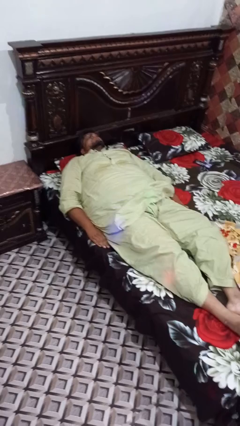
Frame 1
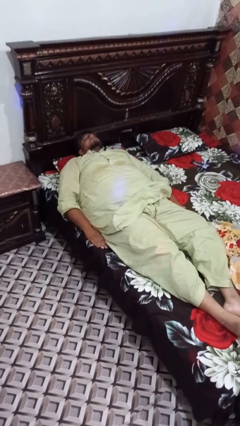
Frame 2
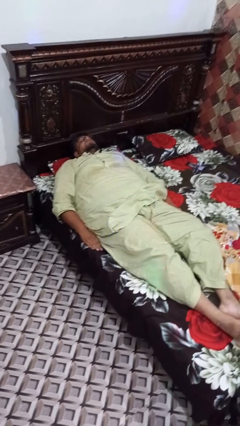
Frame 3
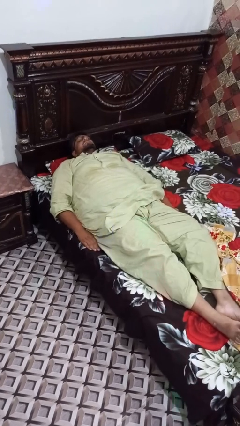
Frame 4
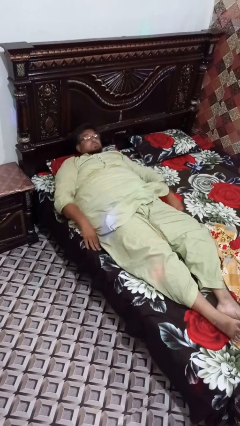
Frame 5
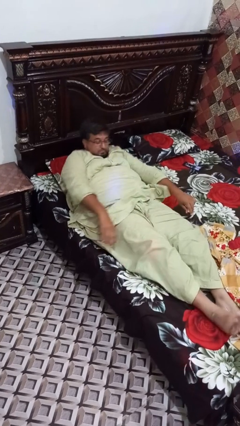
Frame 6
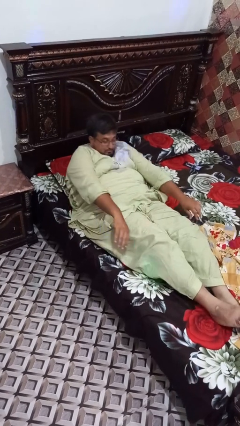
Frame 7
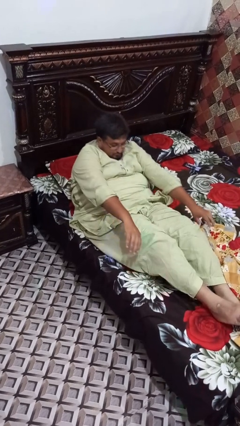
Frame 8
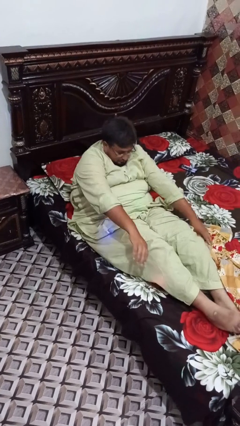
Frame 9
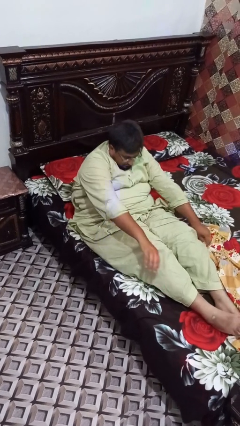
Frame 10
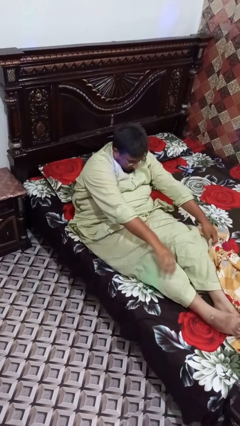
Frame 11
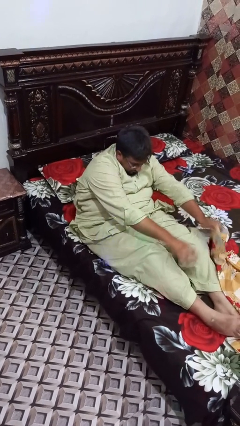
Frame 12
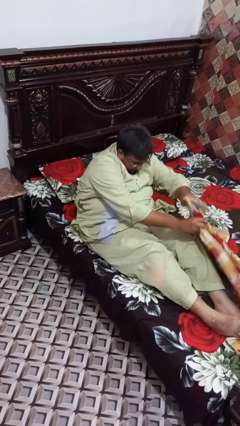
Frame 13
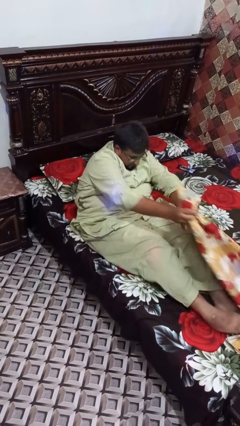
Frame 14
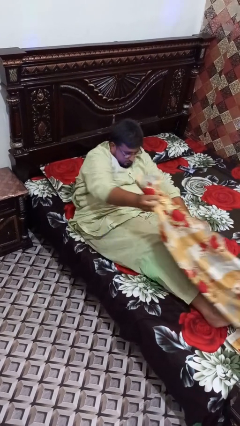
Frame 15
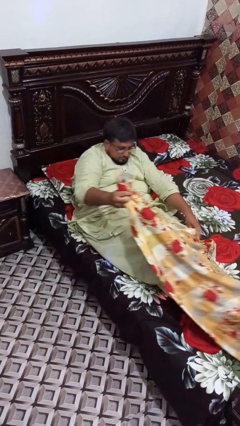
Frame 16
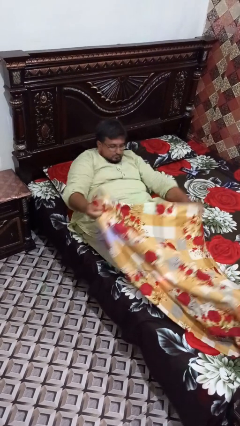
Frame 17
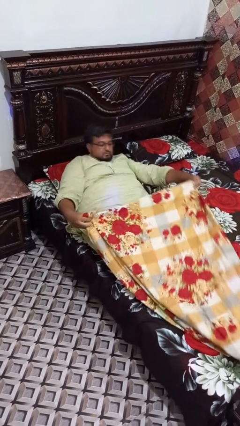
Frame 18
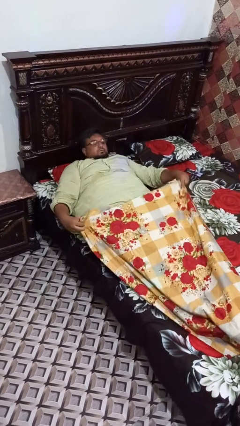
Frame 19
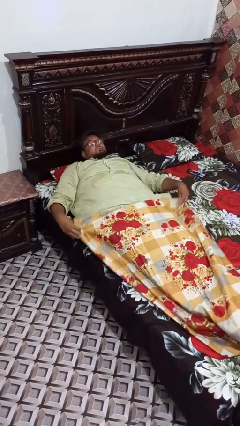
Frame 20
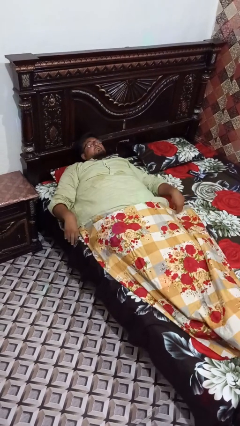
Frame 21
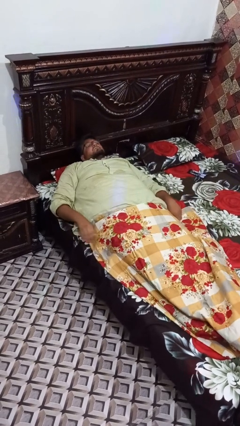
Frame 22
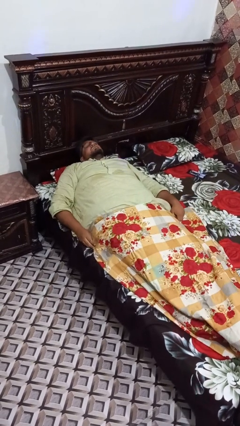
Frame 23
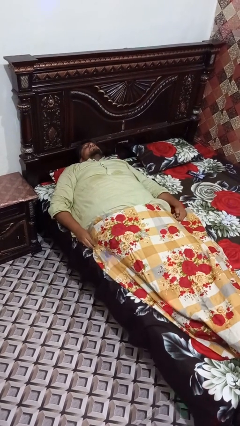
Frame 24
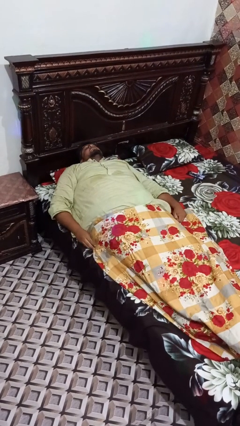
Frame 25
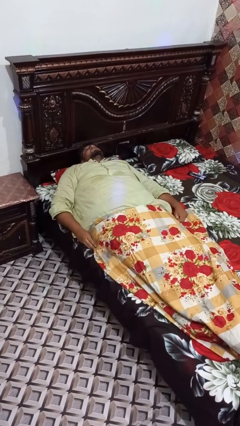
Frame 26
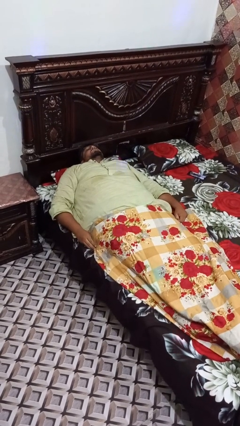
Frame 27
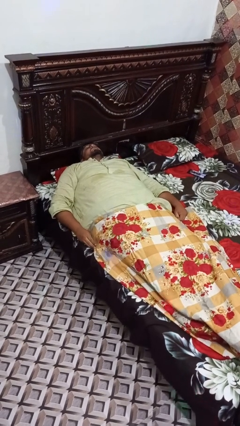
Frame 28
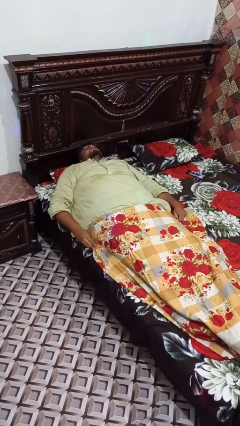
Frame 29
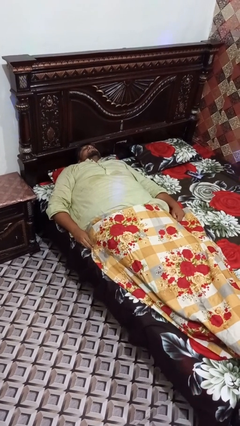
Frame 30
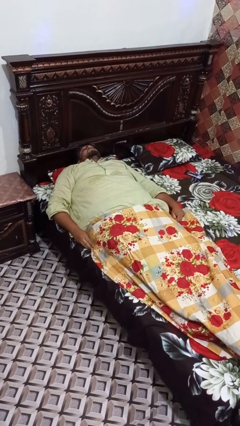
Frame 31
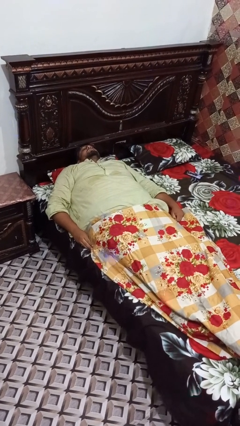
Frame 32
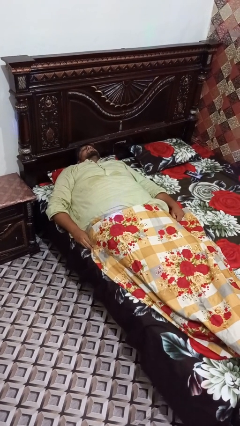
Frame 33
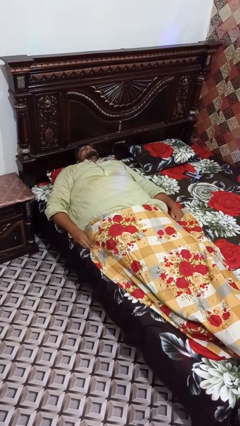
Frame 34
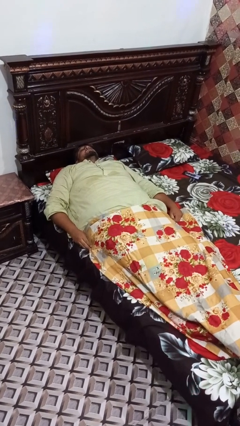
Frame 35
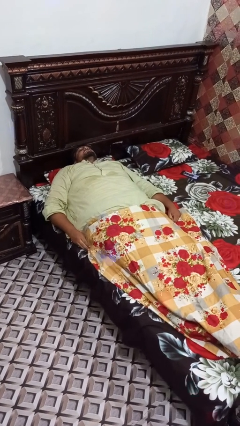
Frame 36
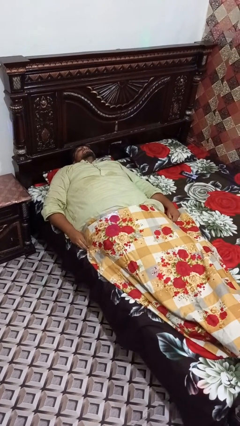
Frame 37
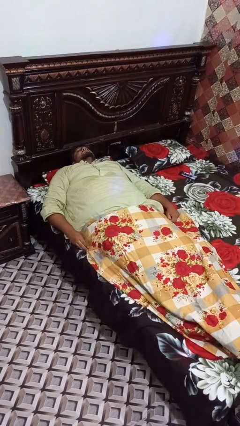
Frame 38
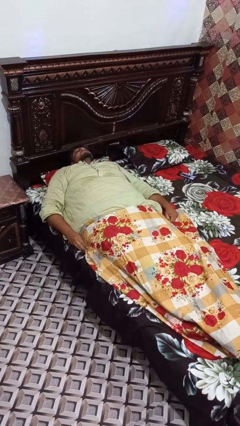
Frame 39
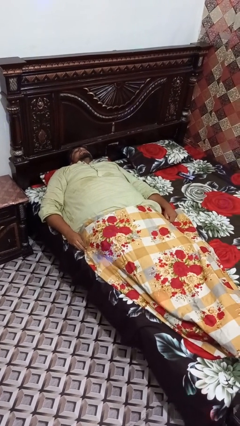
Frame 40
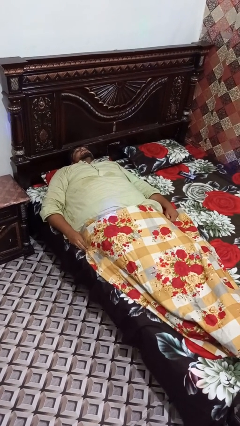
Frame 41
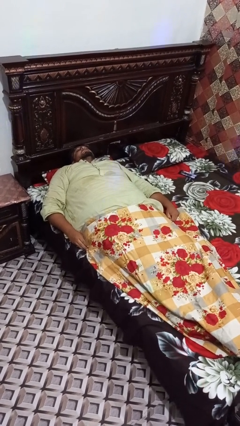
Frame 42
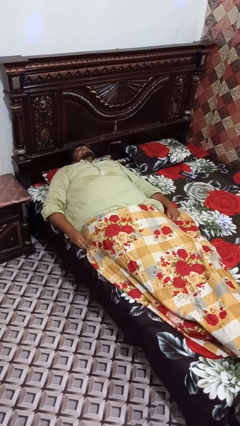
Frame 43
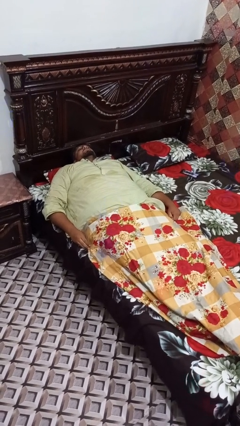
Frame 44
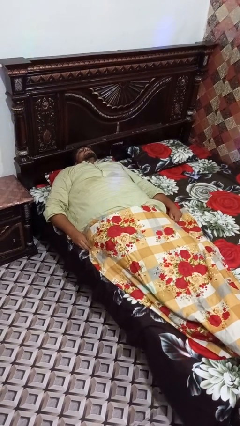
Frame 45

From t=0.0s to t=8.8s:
person covers with bedsheets

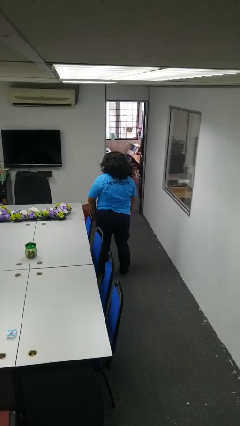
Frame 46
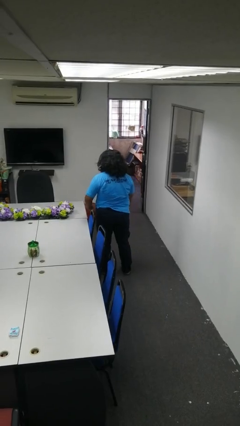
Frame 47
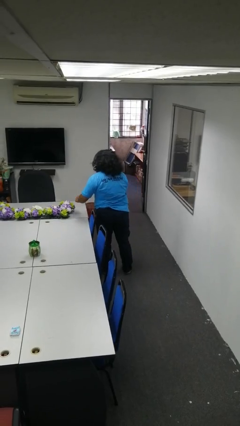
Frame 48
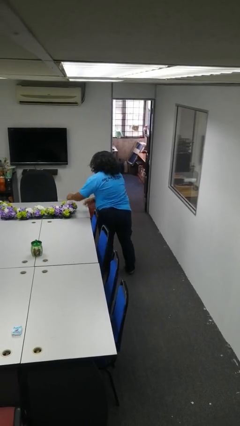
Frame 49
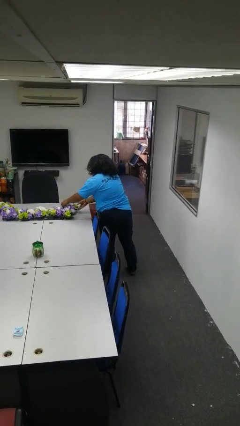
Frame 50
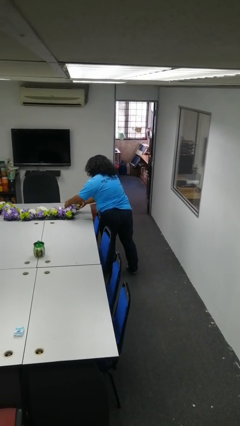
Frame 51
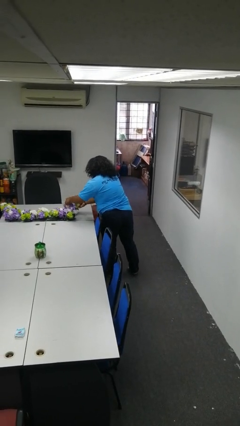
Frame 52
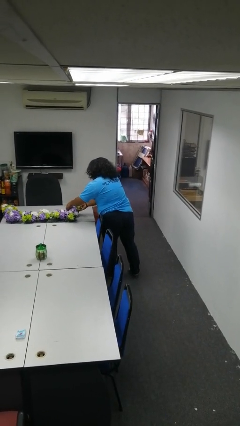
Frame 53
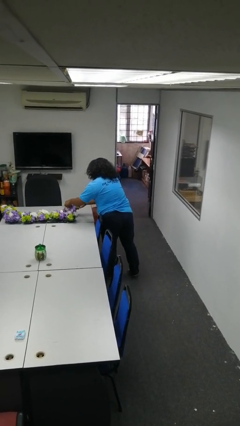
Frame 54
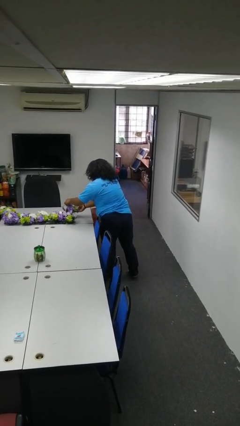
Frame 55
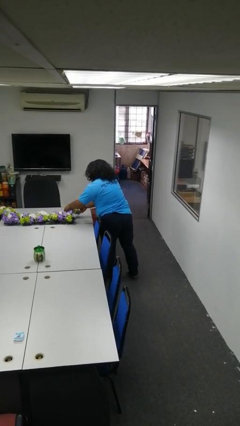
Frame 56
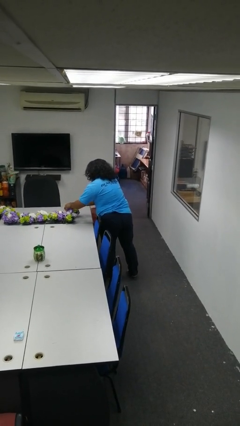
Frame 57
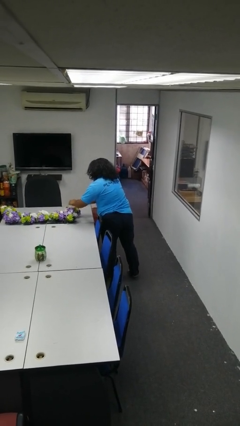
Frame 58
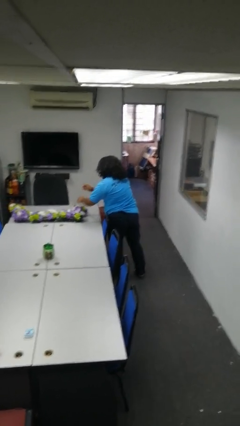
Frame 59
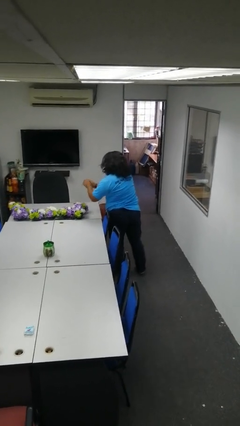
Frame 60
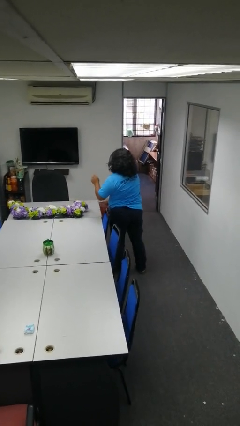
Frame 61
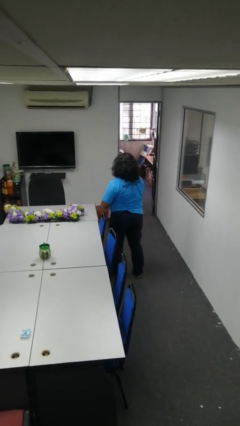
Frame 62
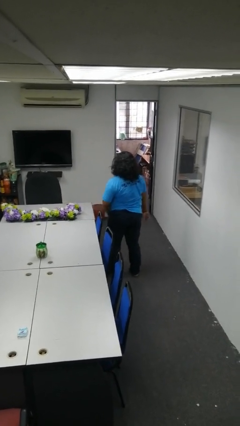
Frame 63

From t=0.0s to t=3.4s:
person arranges flowers in vase

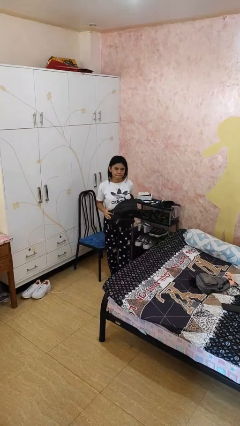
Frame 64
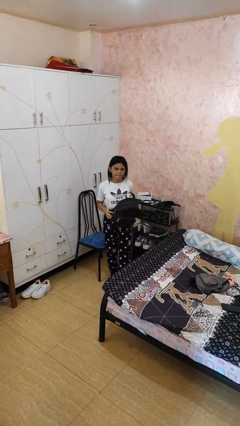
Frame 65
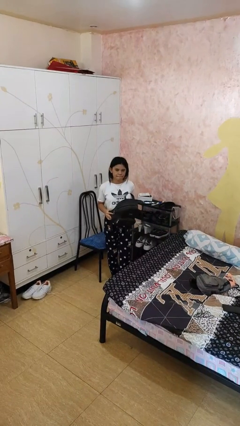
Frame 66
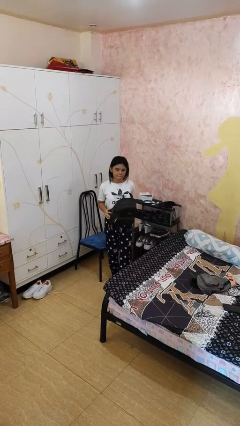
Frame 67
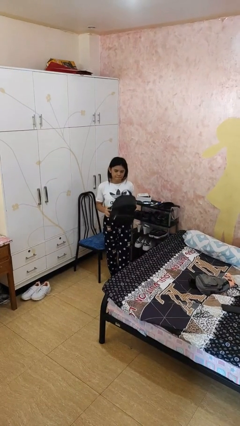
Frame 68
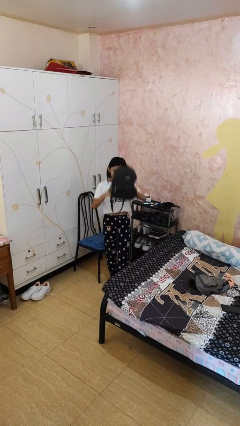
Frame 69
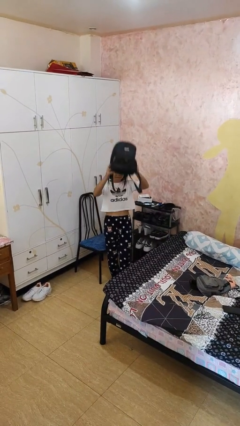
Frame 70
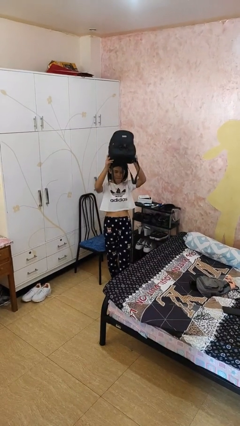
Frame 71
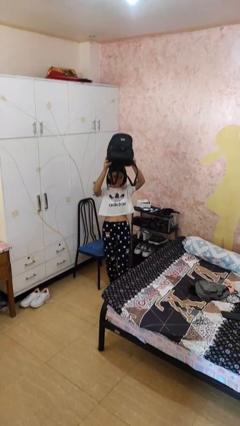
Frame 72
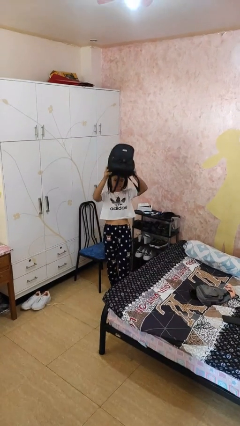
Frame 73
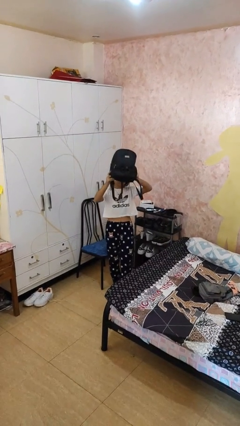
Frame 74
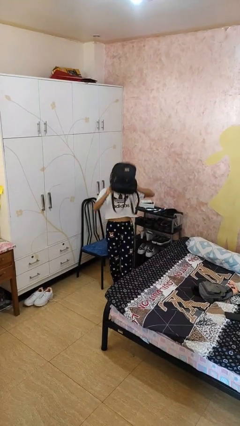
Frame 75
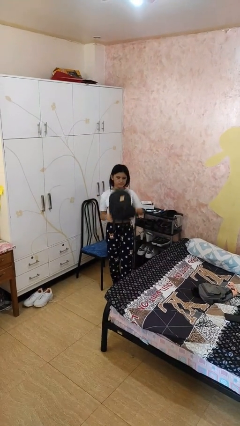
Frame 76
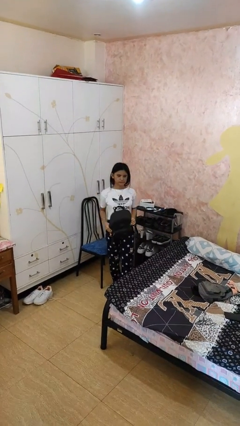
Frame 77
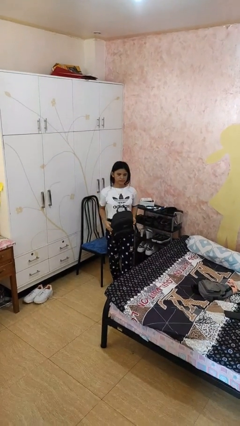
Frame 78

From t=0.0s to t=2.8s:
person holds object above head

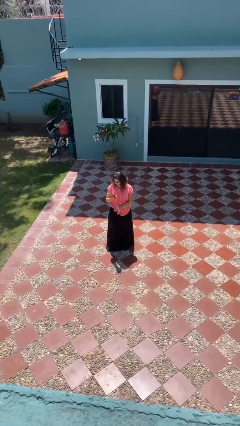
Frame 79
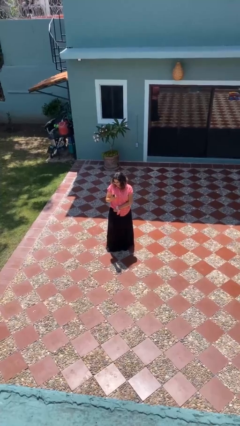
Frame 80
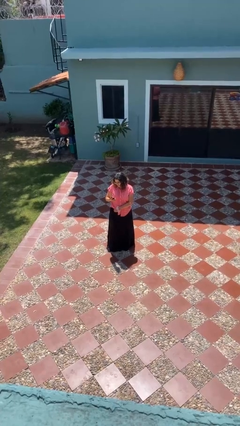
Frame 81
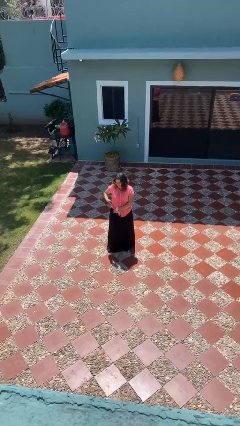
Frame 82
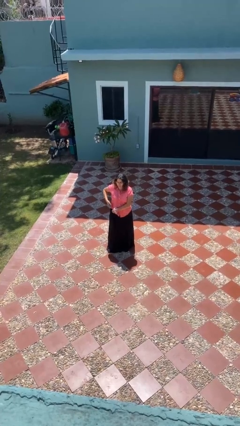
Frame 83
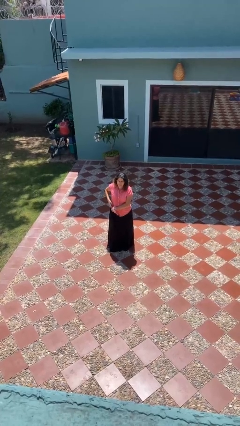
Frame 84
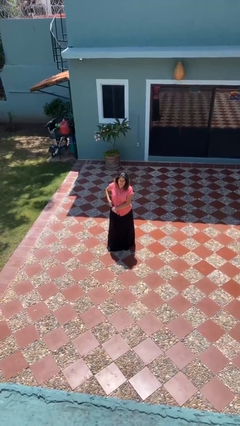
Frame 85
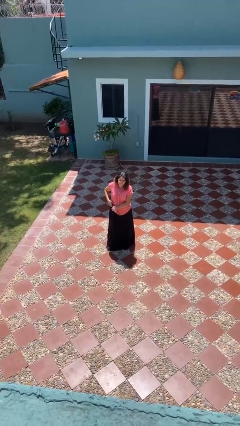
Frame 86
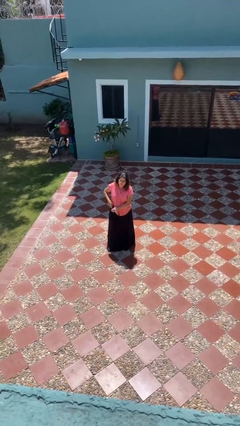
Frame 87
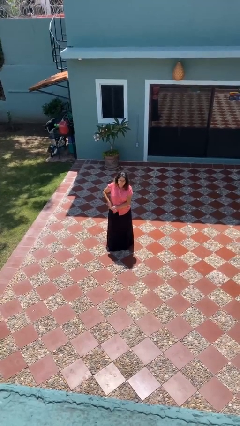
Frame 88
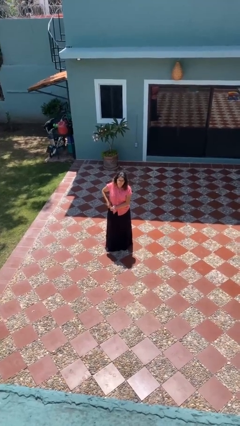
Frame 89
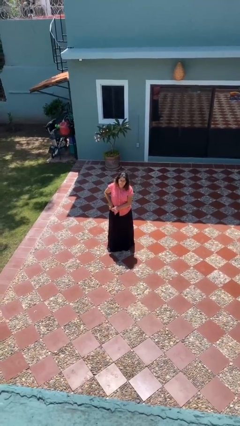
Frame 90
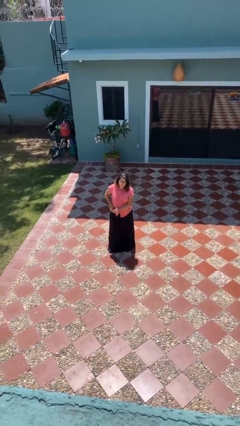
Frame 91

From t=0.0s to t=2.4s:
person puts phone into pocket

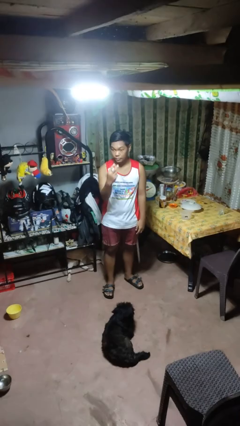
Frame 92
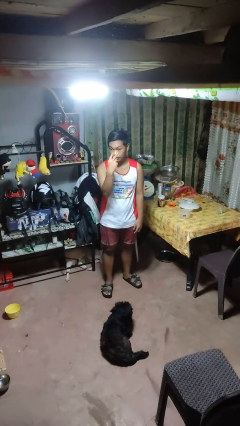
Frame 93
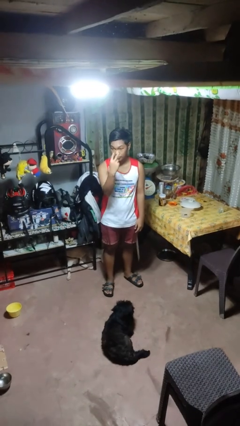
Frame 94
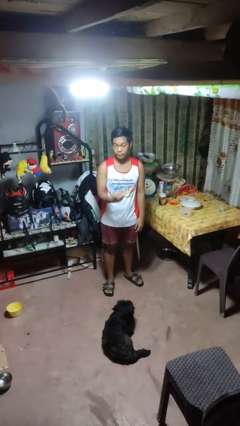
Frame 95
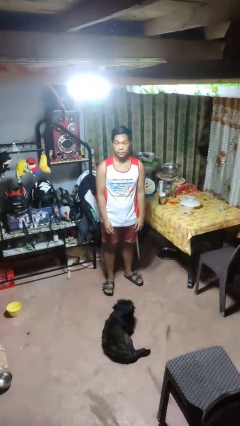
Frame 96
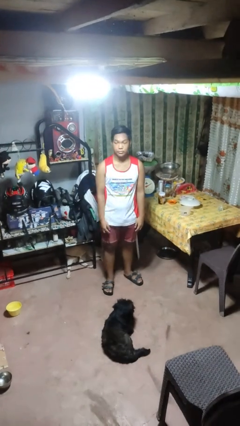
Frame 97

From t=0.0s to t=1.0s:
person gestures watch closely
